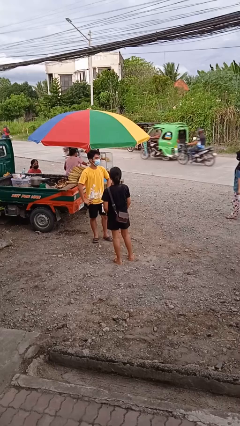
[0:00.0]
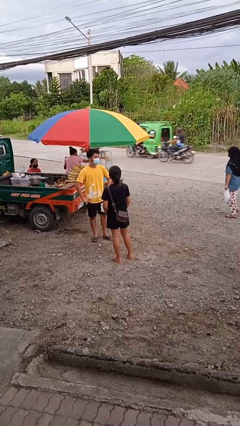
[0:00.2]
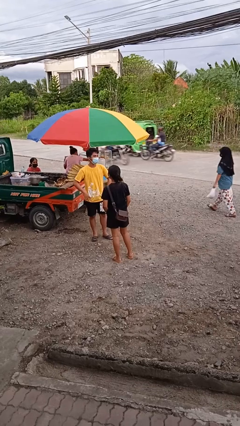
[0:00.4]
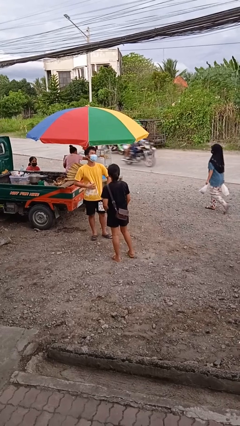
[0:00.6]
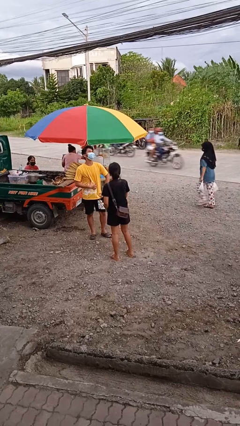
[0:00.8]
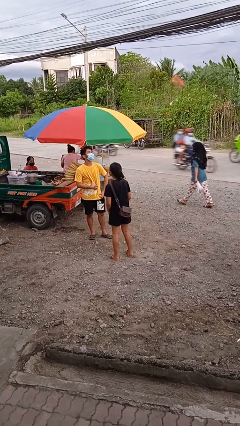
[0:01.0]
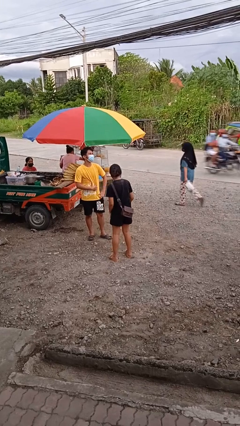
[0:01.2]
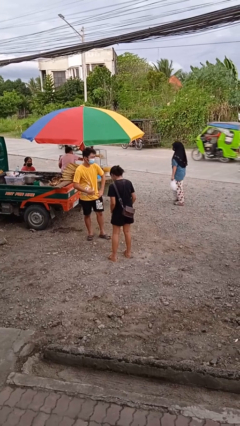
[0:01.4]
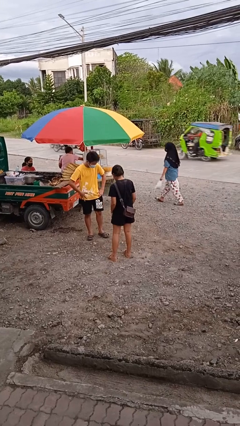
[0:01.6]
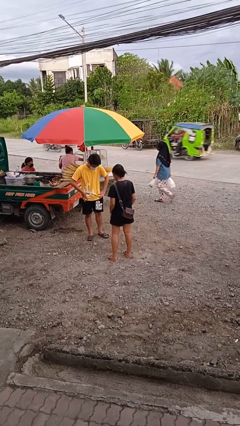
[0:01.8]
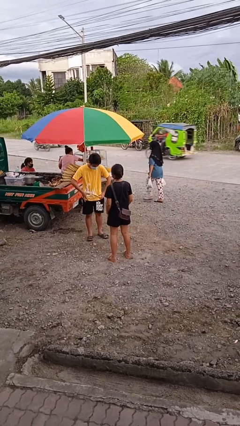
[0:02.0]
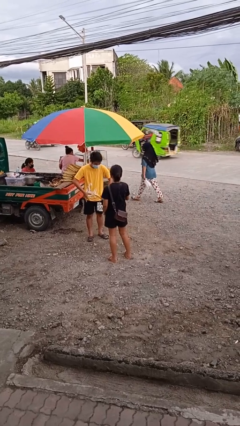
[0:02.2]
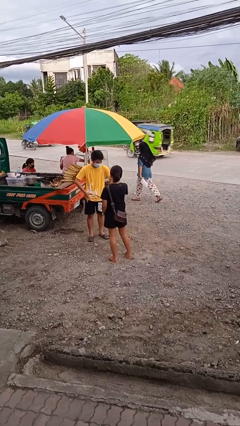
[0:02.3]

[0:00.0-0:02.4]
person laughs with person

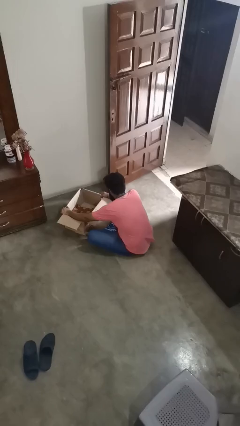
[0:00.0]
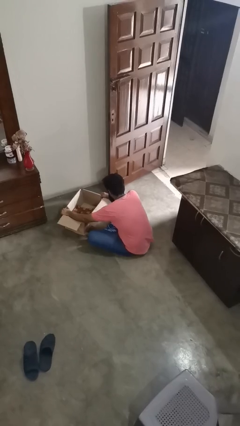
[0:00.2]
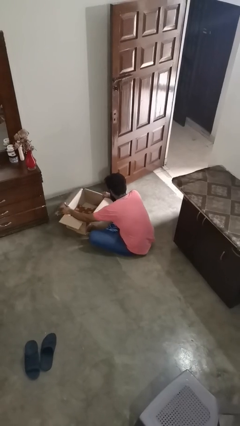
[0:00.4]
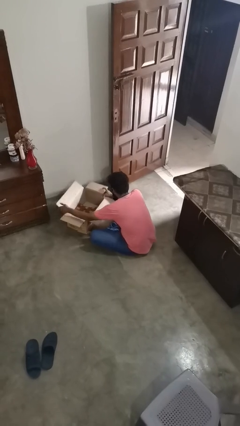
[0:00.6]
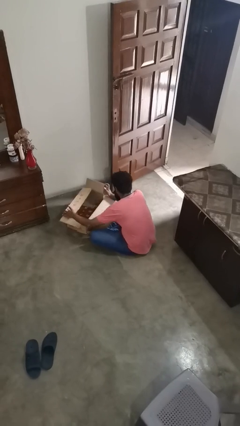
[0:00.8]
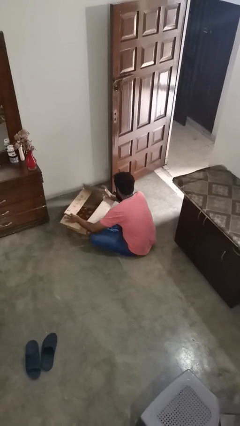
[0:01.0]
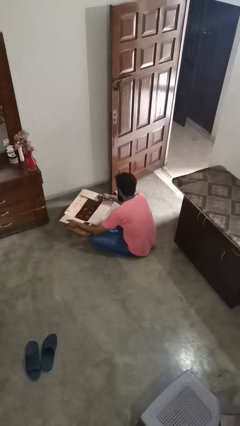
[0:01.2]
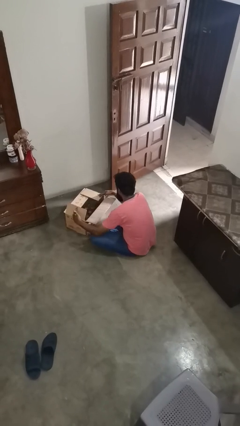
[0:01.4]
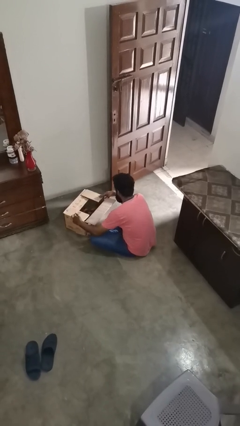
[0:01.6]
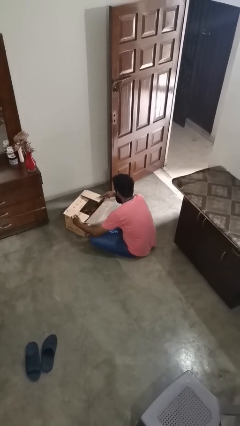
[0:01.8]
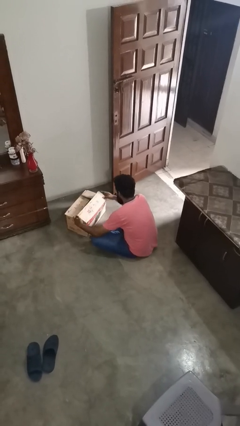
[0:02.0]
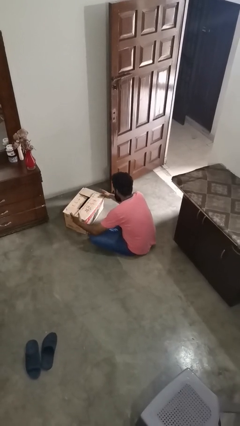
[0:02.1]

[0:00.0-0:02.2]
person closes box

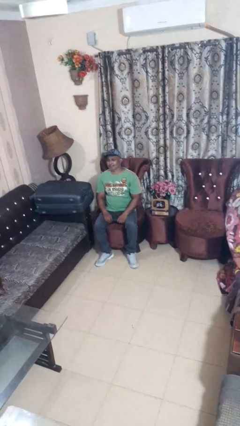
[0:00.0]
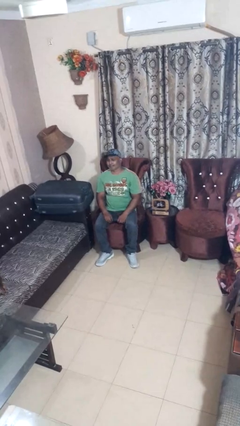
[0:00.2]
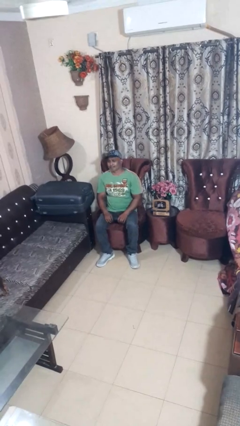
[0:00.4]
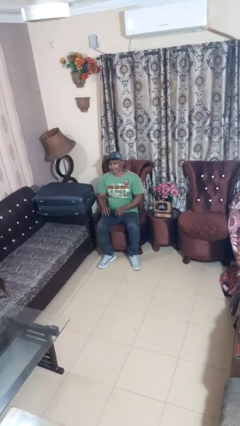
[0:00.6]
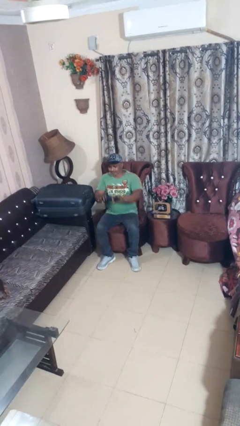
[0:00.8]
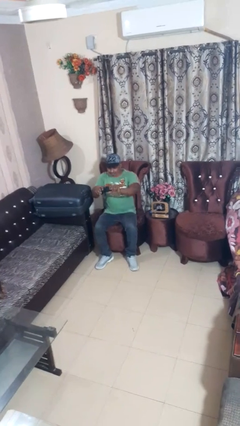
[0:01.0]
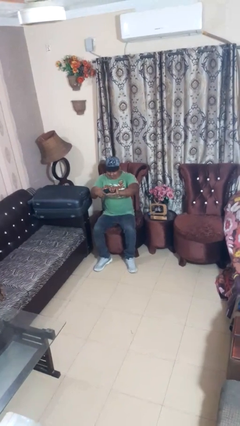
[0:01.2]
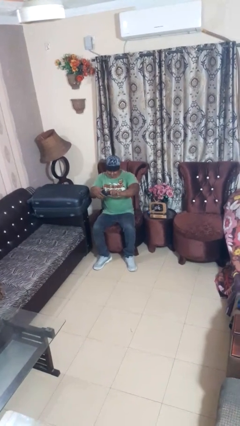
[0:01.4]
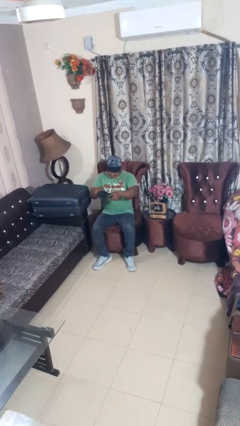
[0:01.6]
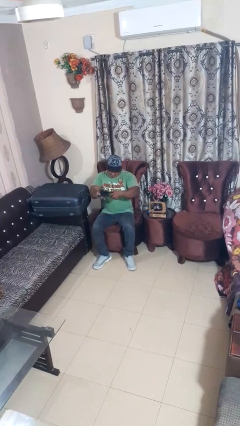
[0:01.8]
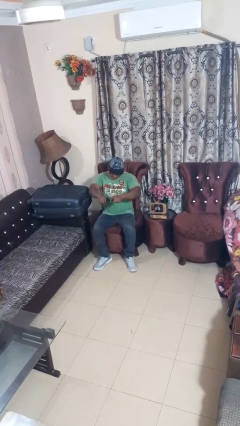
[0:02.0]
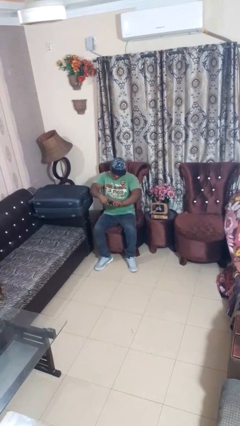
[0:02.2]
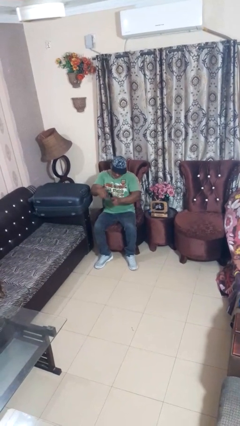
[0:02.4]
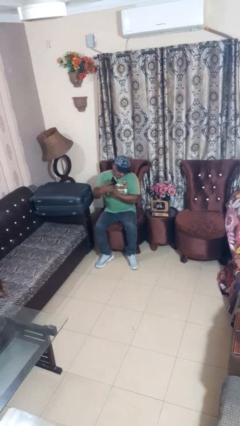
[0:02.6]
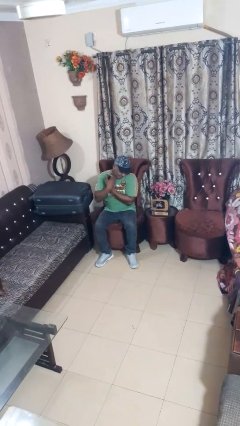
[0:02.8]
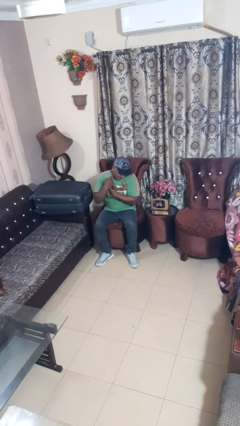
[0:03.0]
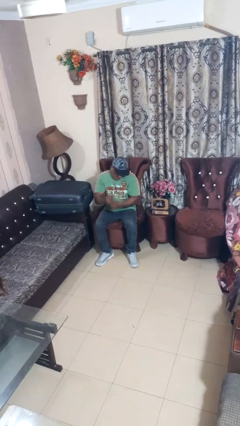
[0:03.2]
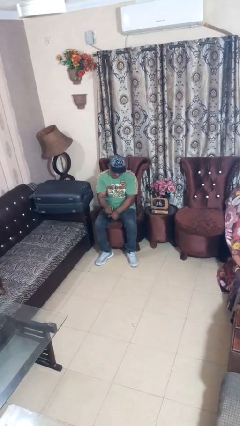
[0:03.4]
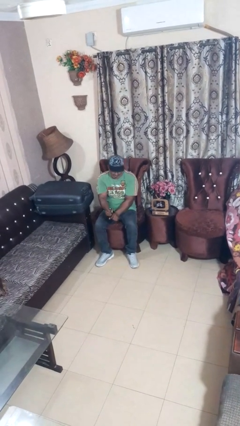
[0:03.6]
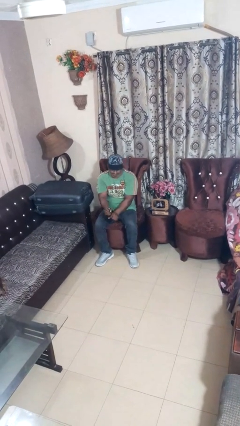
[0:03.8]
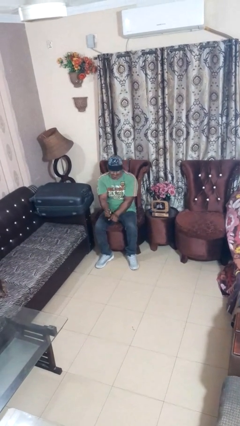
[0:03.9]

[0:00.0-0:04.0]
person squeezes object

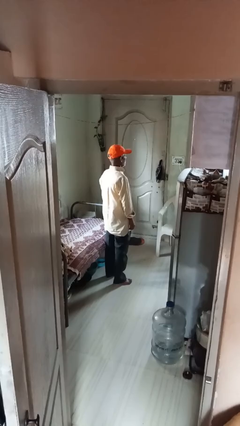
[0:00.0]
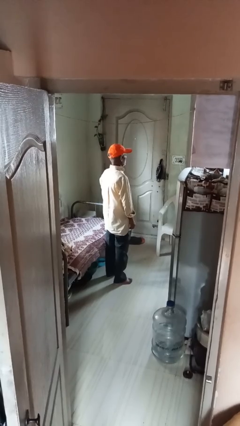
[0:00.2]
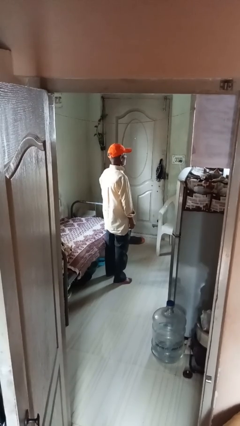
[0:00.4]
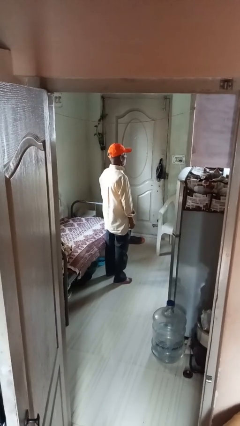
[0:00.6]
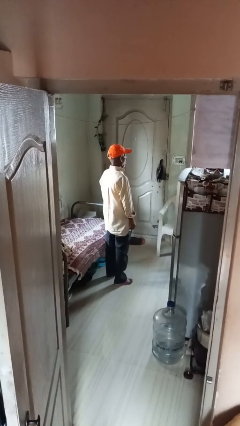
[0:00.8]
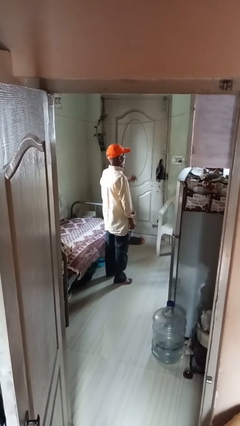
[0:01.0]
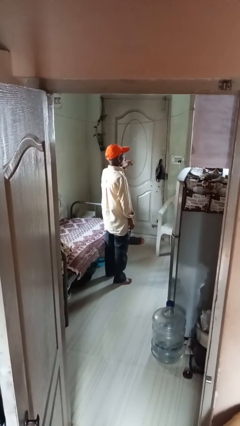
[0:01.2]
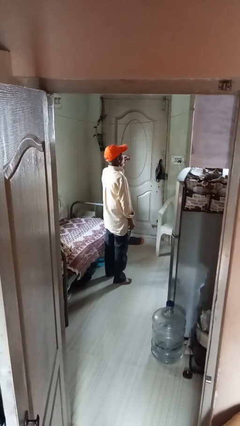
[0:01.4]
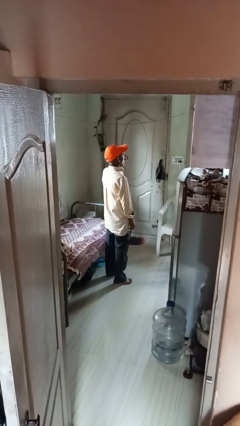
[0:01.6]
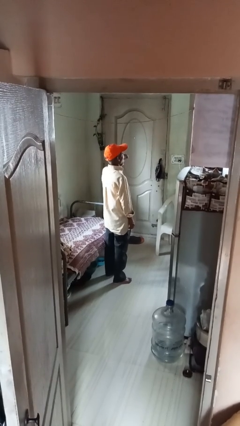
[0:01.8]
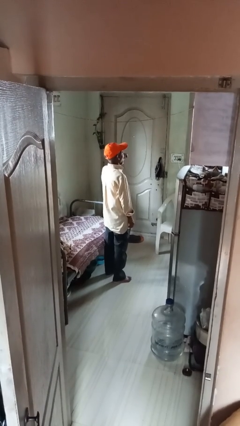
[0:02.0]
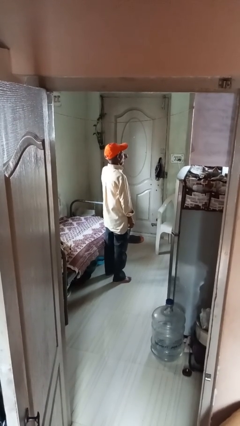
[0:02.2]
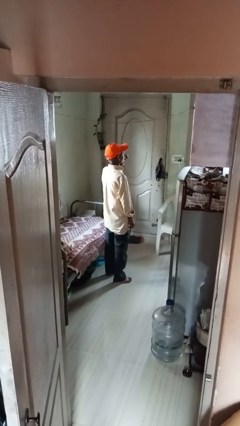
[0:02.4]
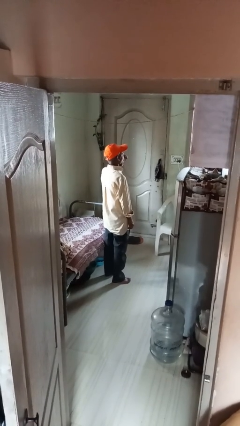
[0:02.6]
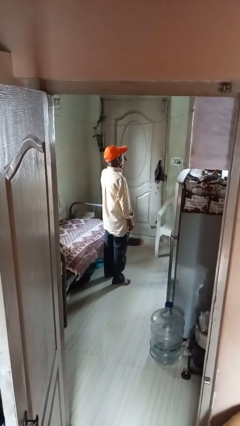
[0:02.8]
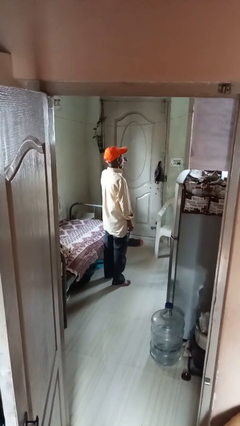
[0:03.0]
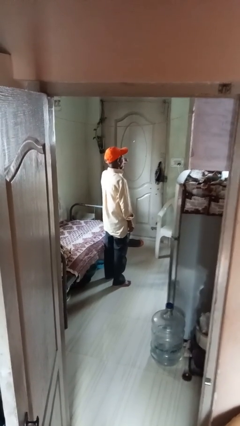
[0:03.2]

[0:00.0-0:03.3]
person yawns

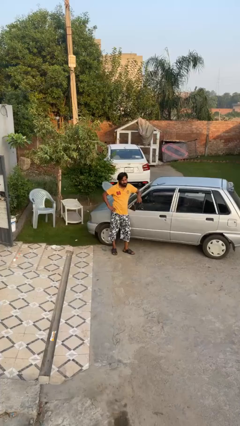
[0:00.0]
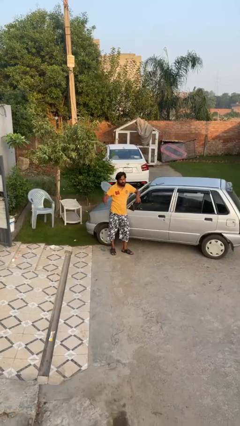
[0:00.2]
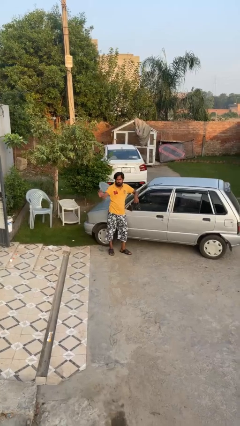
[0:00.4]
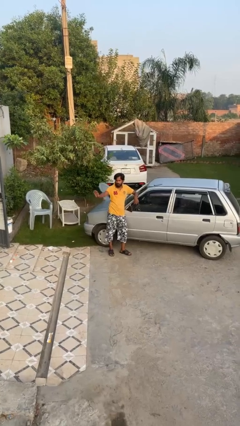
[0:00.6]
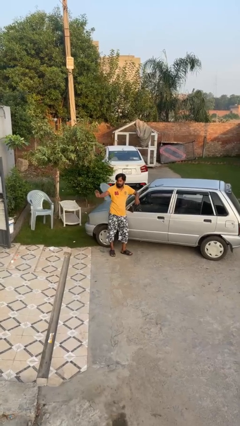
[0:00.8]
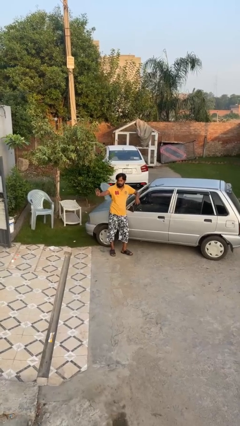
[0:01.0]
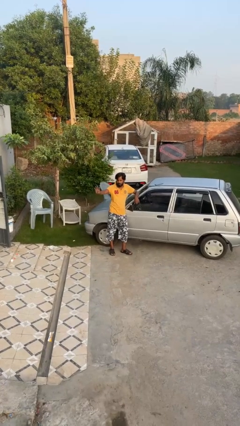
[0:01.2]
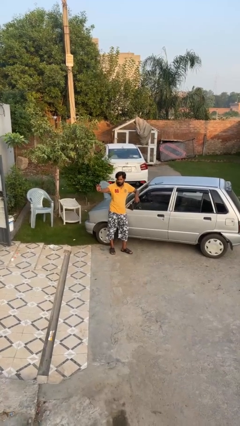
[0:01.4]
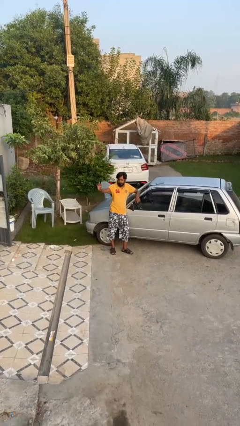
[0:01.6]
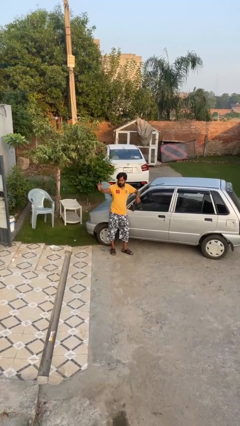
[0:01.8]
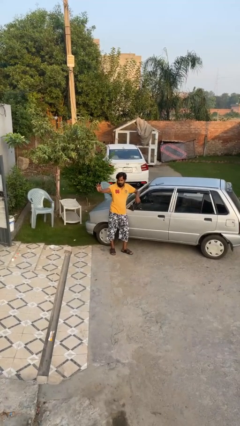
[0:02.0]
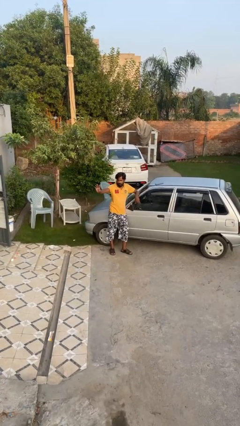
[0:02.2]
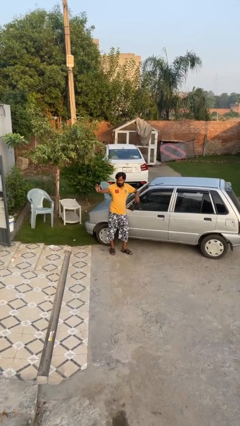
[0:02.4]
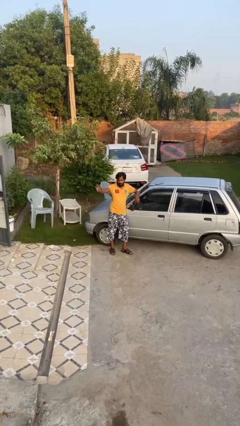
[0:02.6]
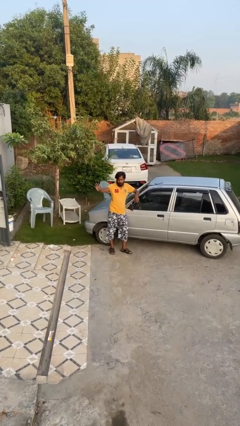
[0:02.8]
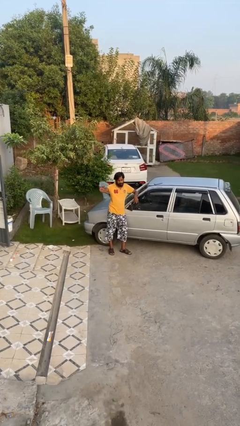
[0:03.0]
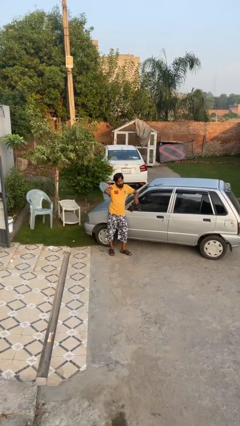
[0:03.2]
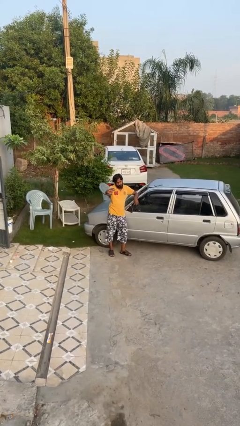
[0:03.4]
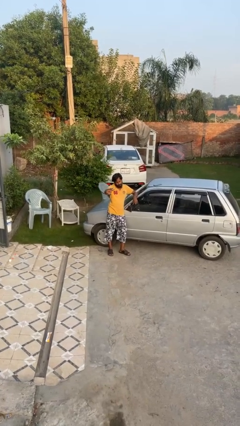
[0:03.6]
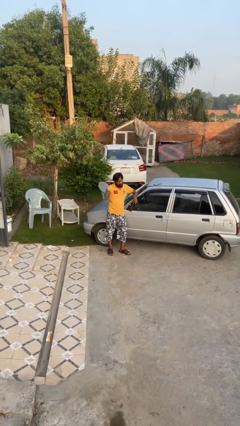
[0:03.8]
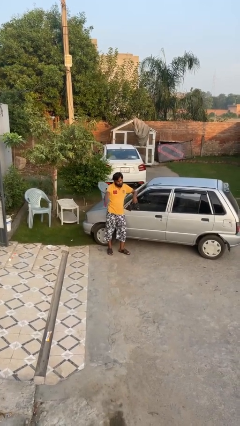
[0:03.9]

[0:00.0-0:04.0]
person waves at person

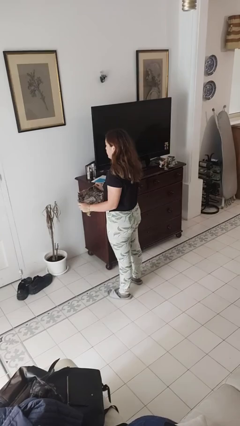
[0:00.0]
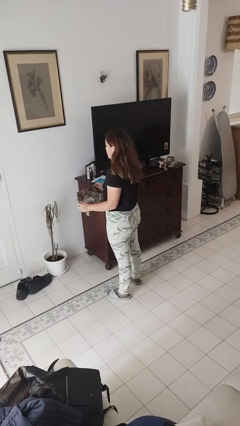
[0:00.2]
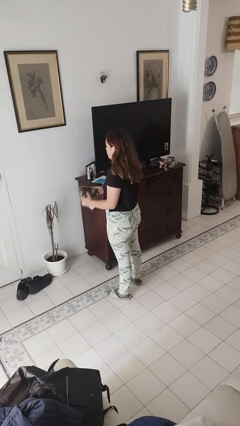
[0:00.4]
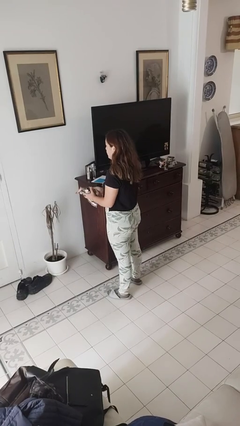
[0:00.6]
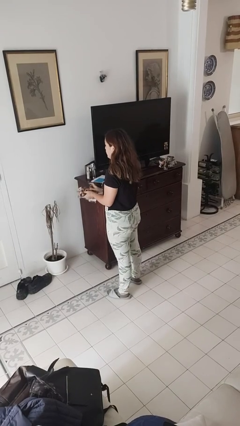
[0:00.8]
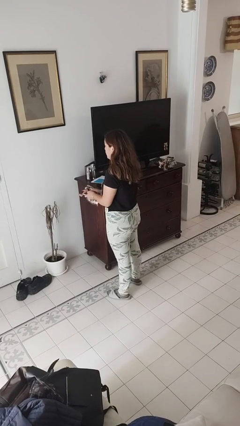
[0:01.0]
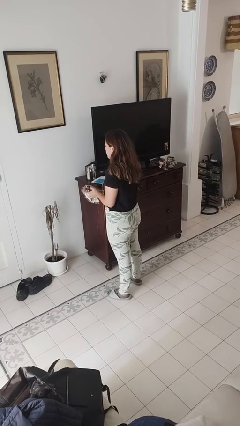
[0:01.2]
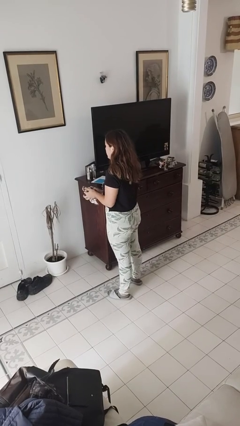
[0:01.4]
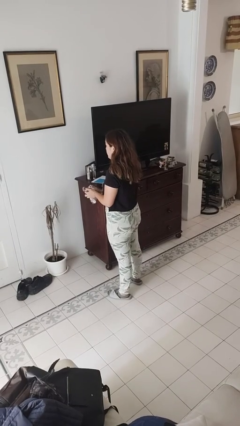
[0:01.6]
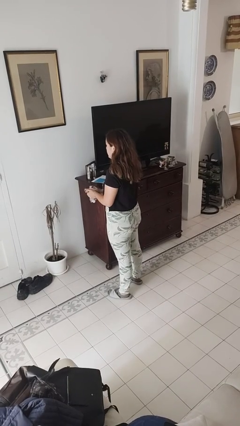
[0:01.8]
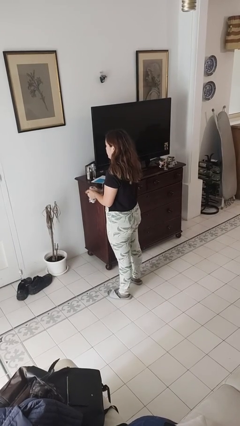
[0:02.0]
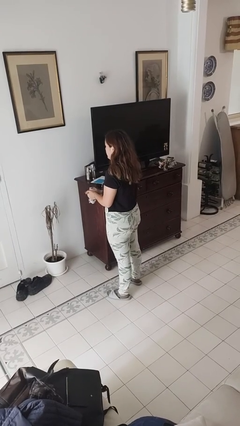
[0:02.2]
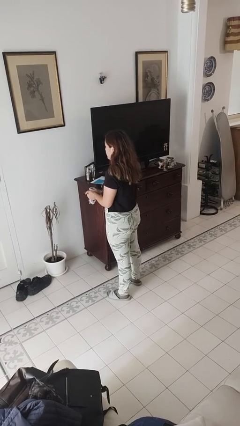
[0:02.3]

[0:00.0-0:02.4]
person crumples paper
